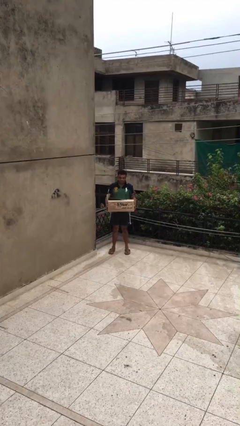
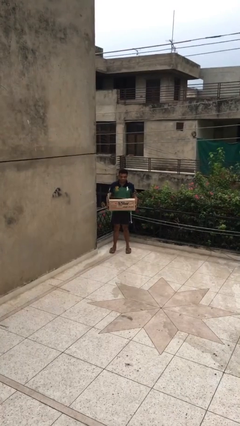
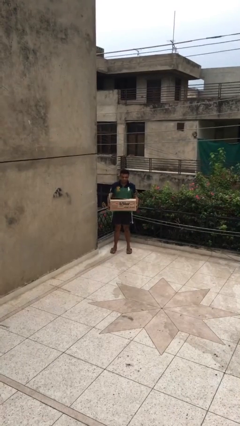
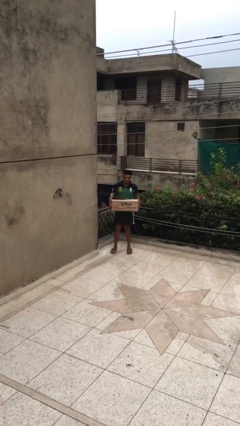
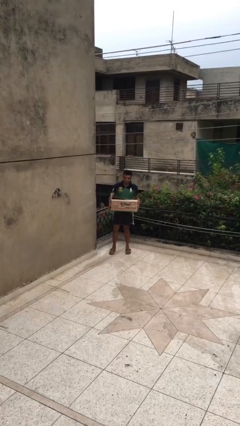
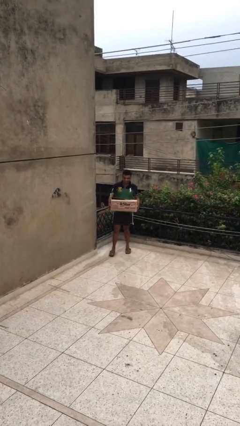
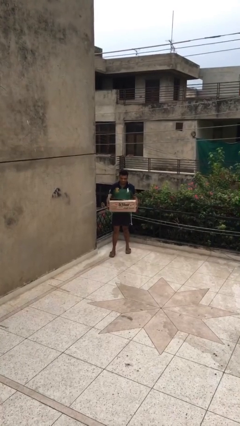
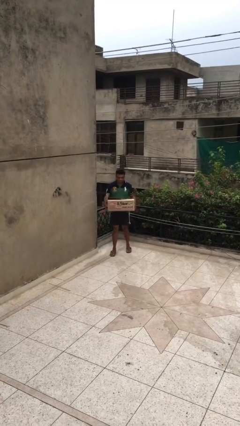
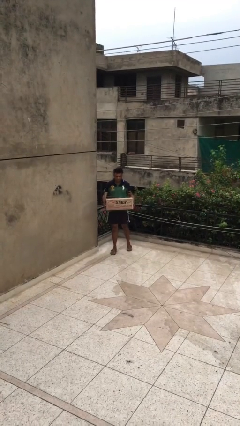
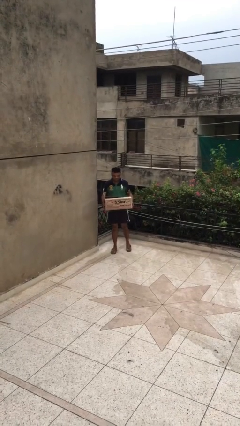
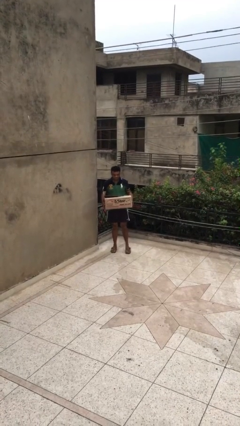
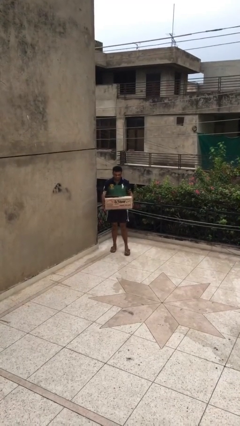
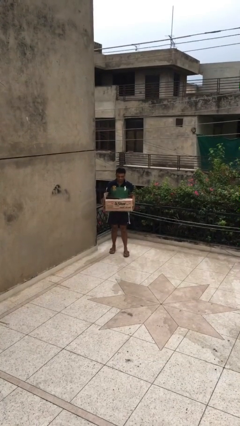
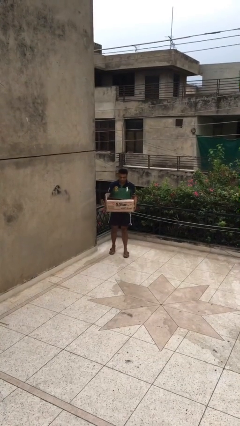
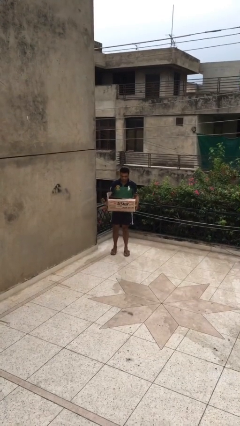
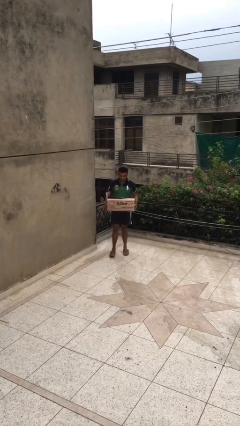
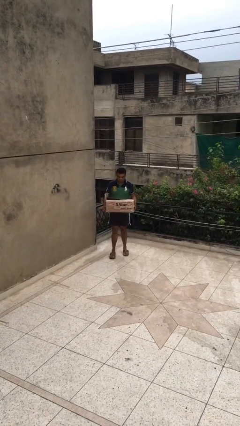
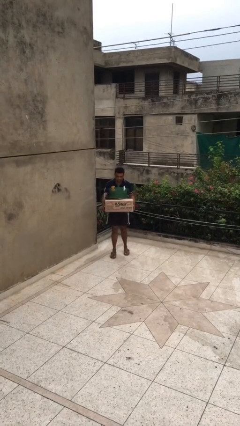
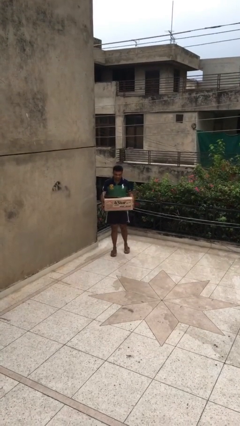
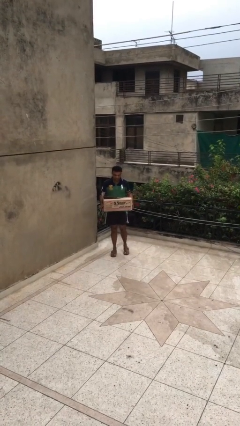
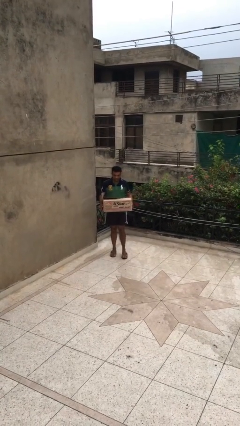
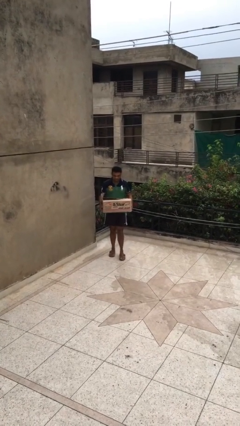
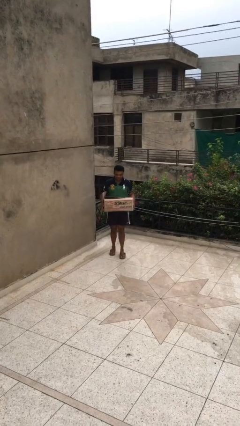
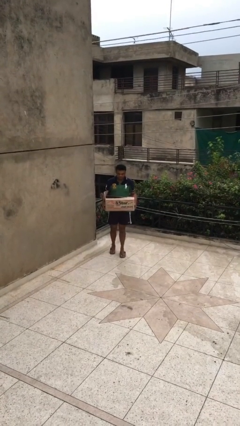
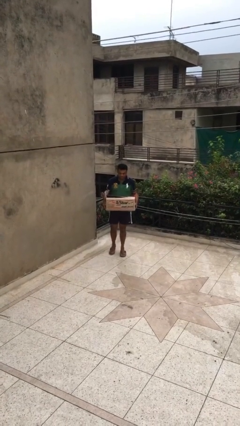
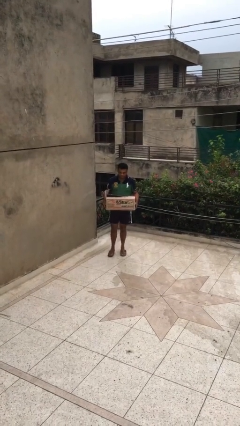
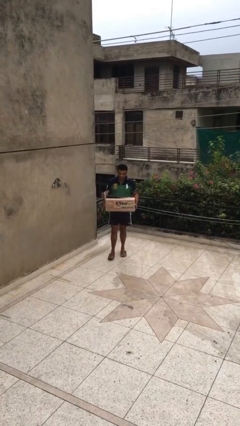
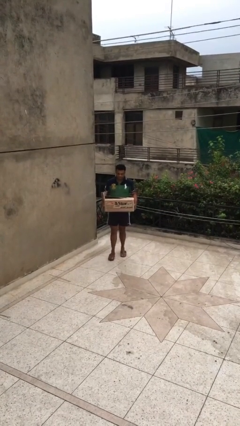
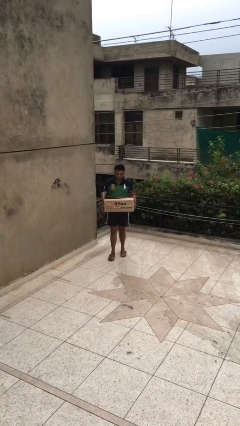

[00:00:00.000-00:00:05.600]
person carries heavy object

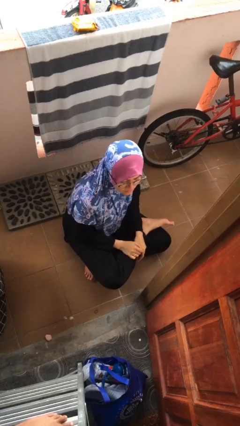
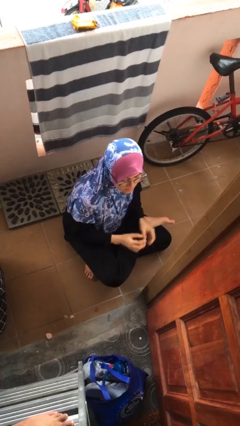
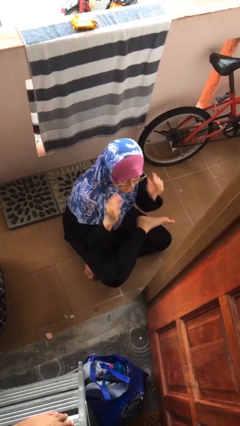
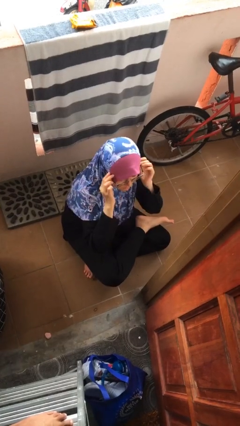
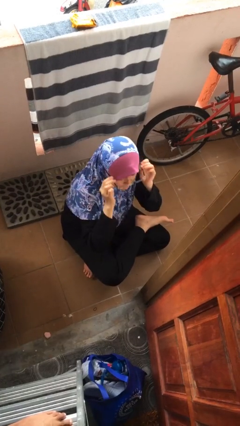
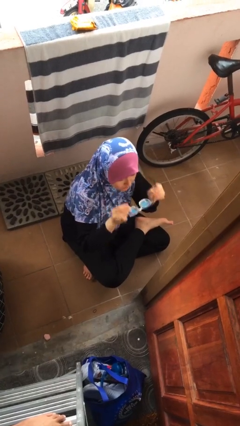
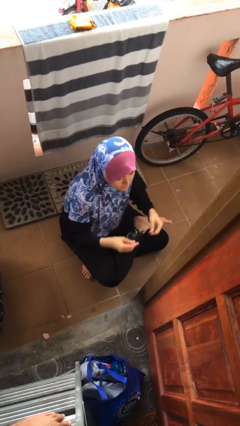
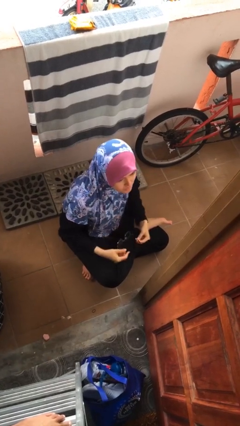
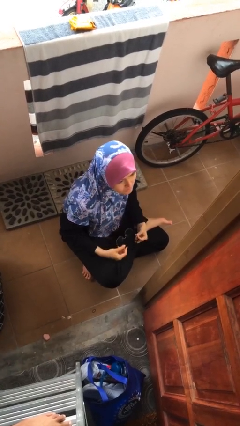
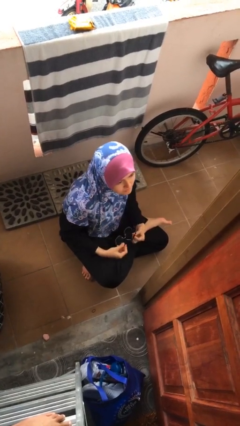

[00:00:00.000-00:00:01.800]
person takes off glasses

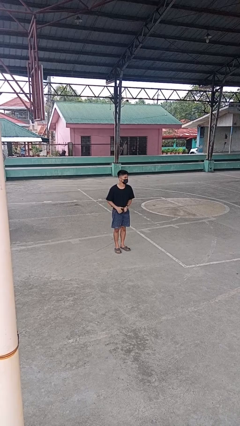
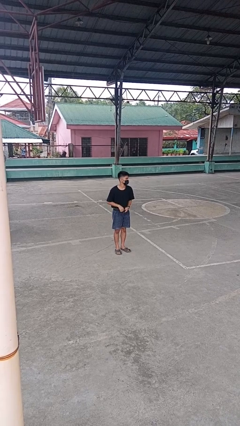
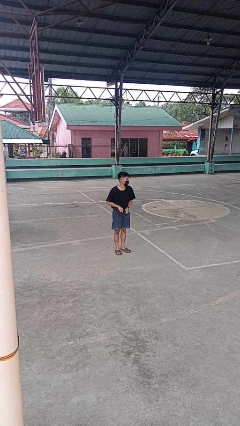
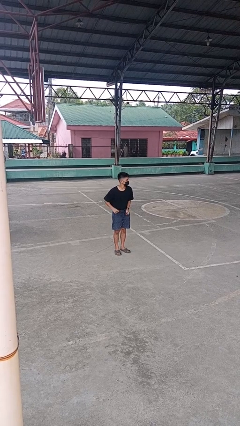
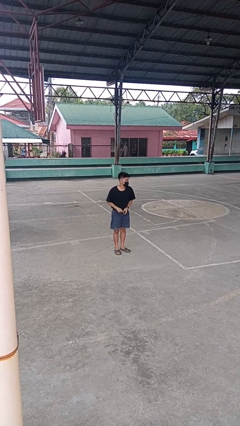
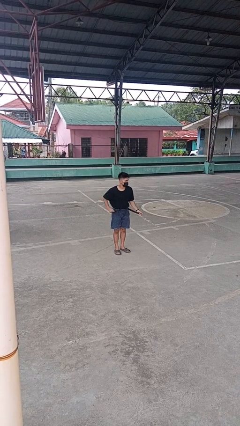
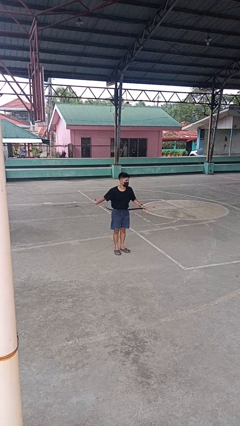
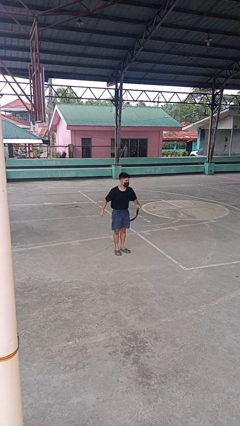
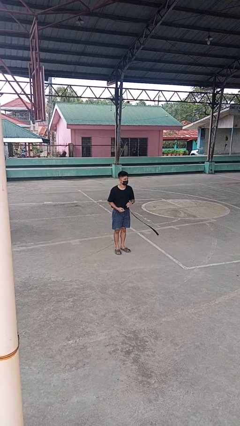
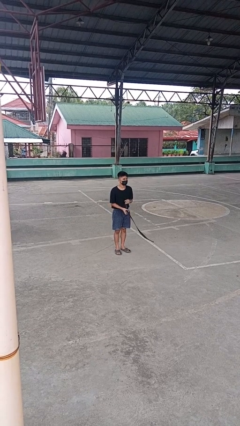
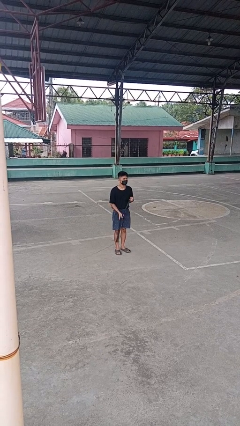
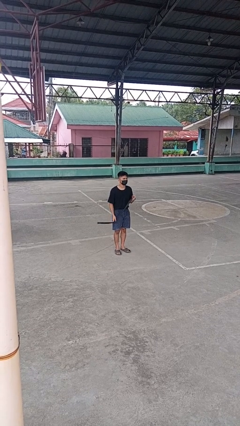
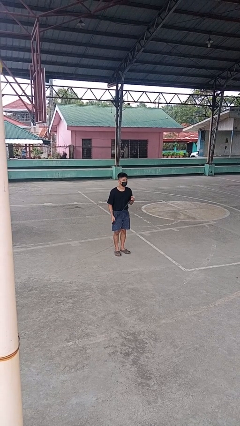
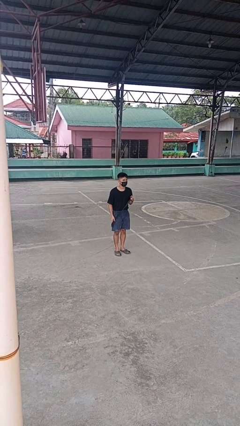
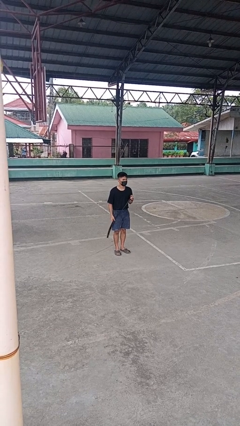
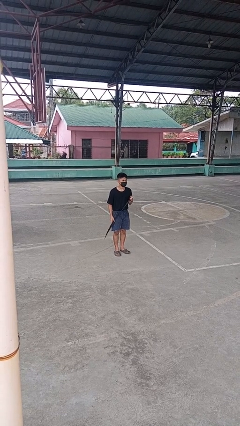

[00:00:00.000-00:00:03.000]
person takes off belt

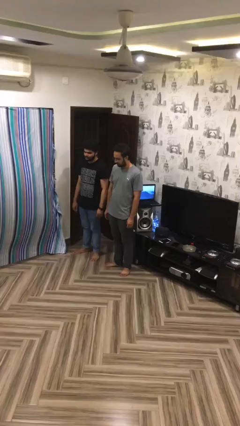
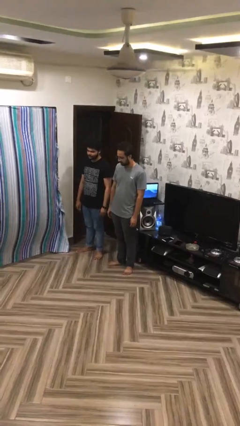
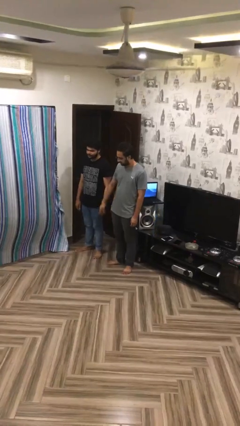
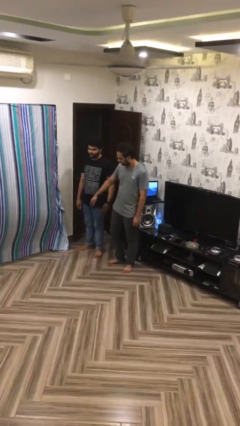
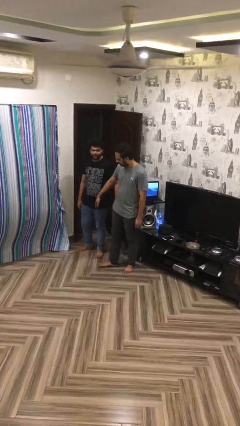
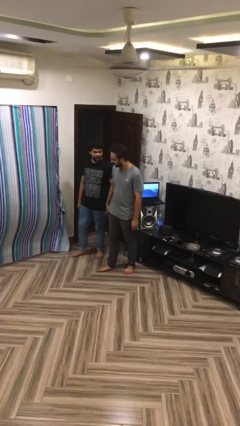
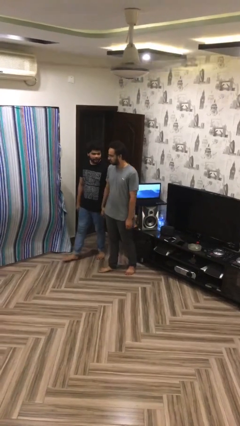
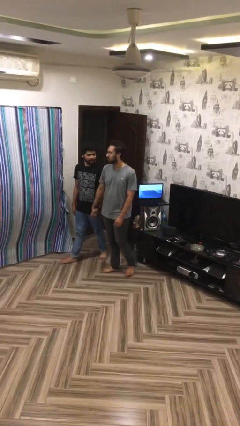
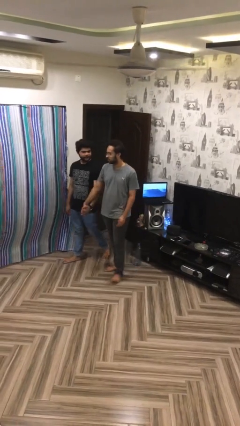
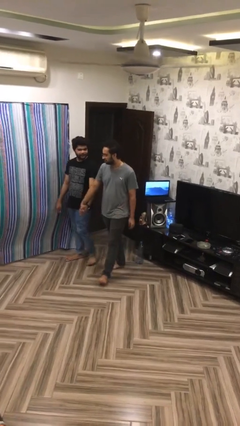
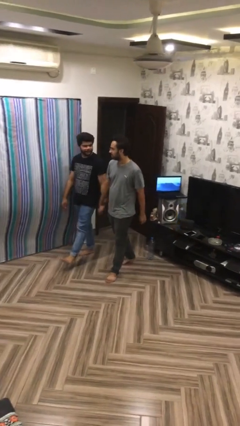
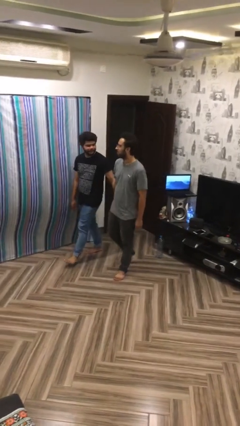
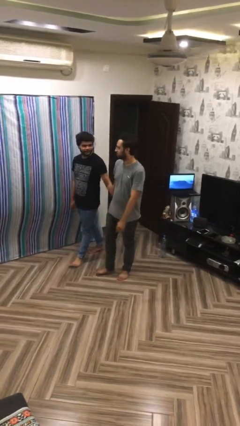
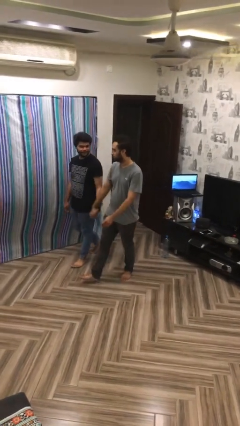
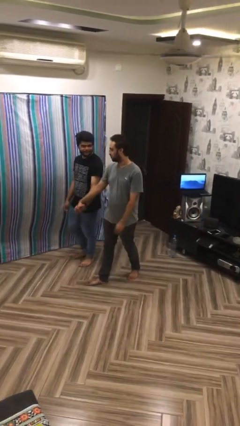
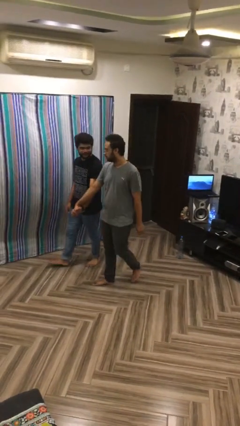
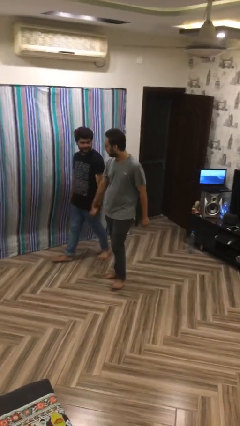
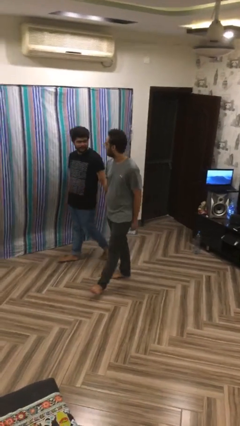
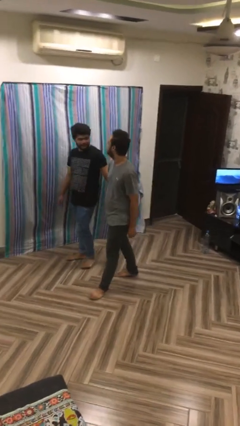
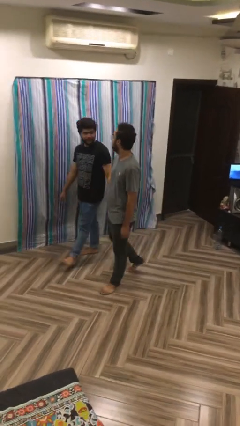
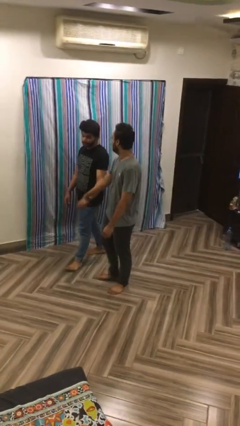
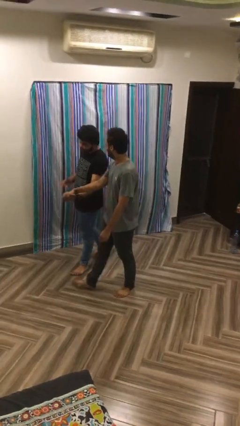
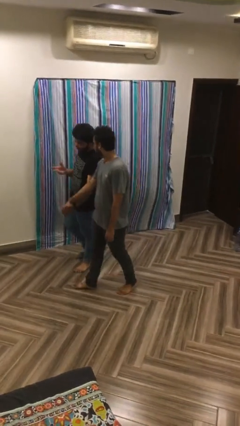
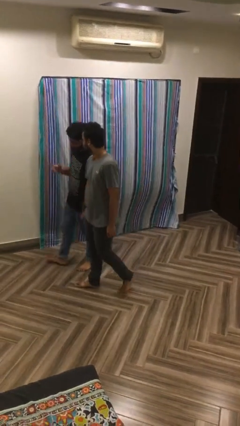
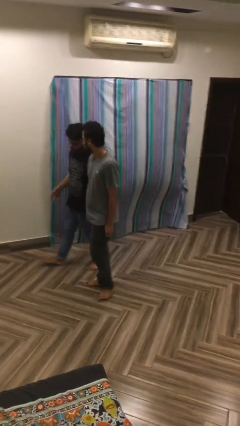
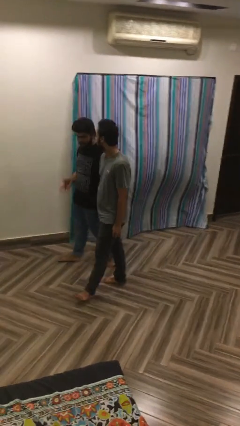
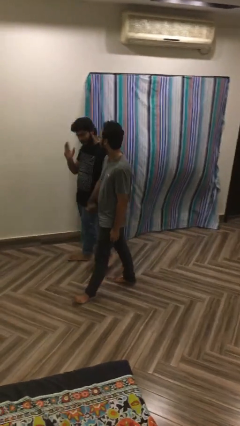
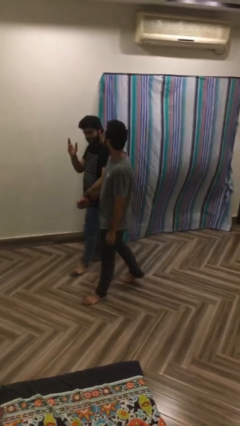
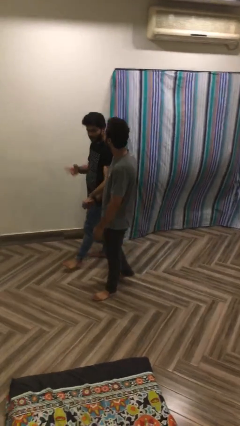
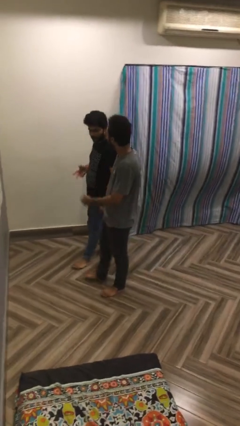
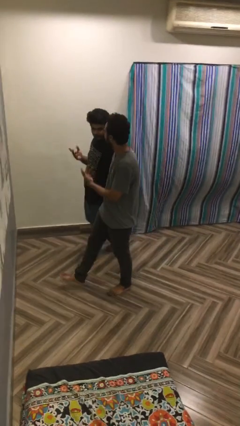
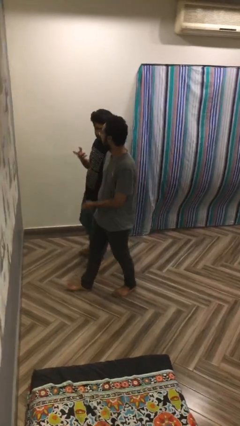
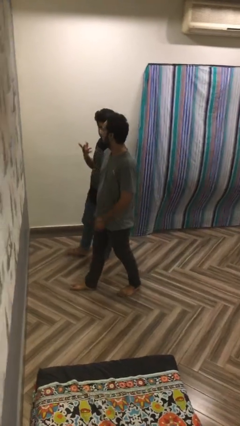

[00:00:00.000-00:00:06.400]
person holds hand

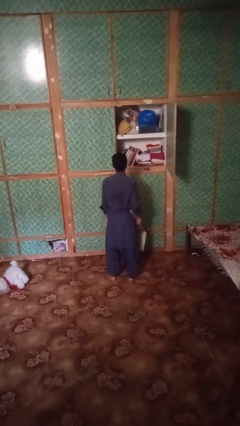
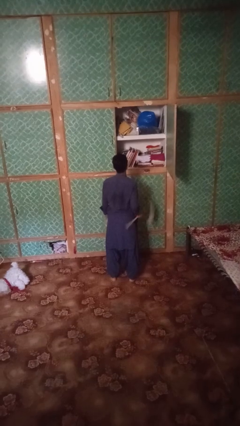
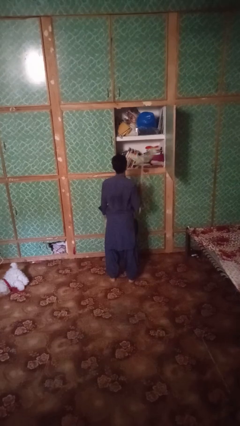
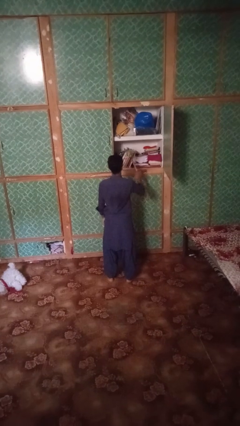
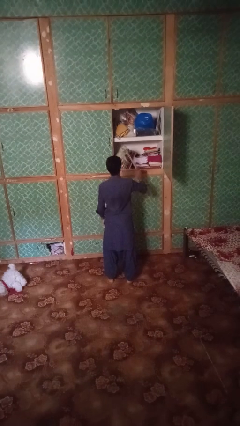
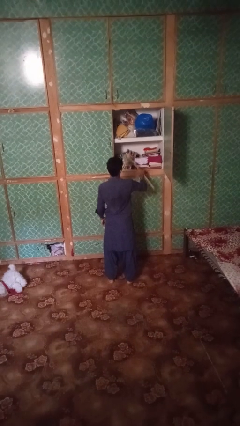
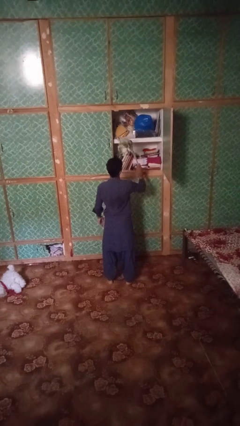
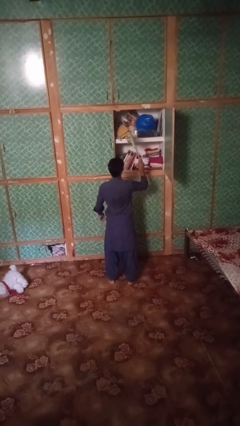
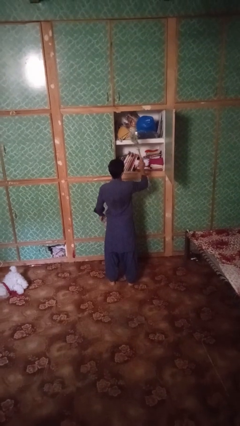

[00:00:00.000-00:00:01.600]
person dusts furniture
